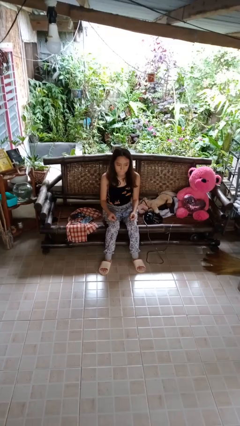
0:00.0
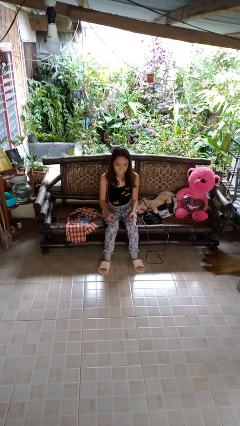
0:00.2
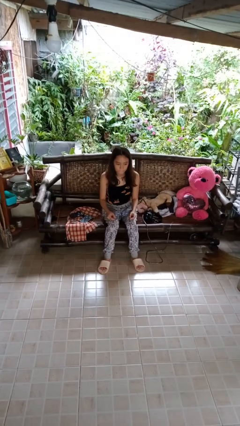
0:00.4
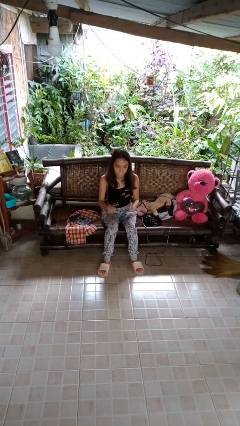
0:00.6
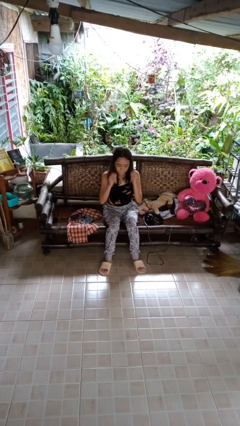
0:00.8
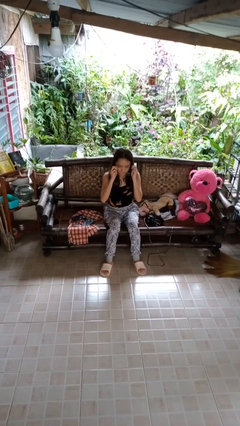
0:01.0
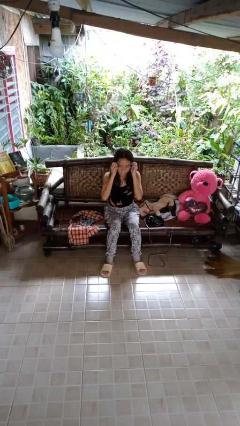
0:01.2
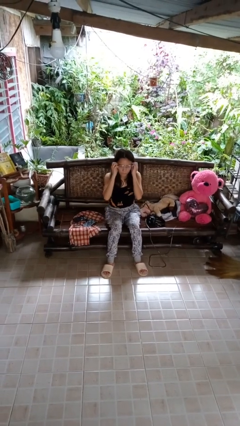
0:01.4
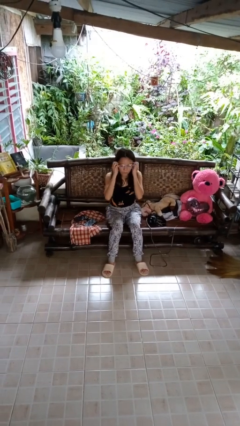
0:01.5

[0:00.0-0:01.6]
person puts on glasses

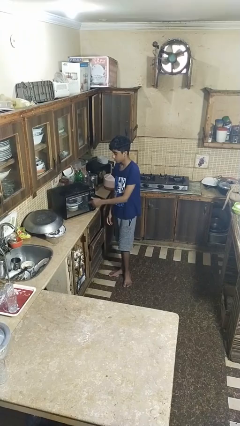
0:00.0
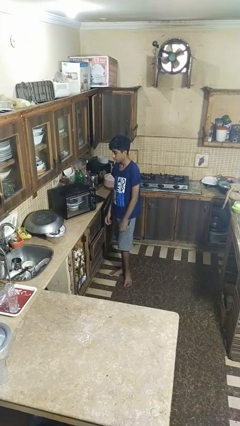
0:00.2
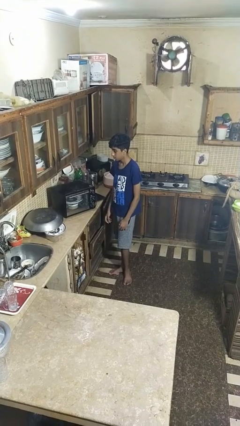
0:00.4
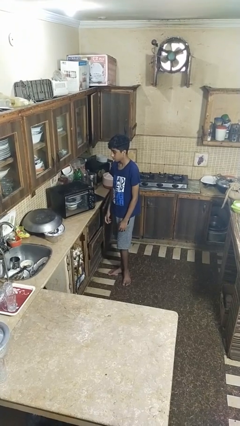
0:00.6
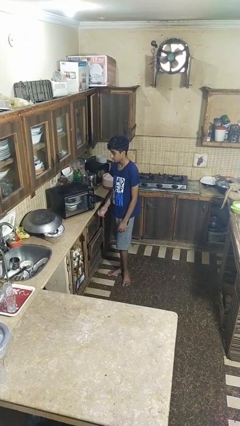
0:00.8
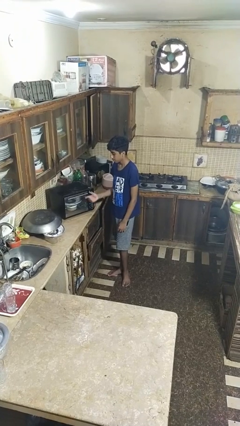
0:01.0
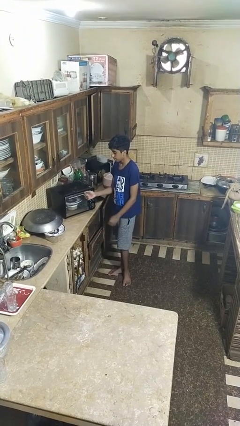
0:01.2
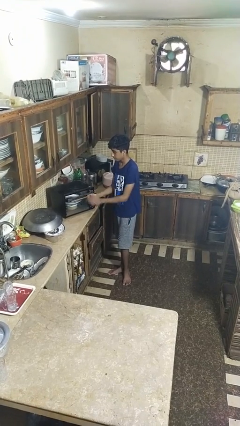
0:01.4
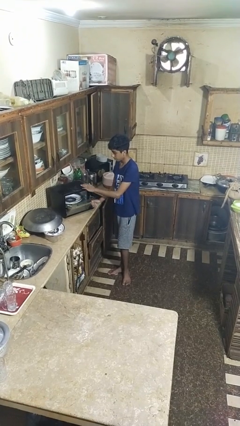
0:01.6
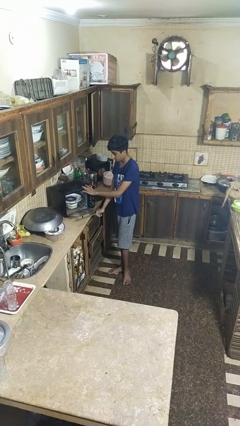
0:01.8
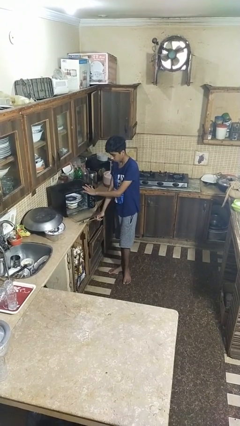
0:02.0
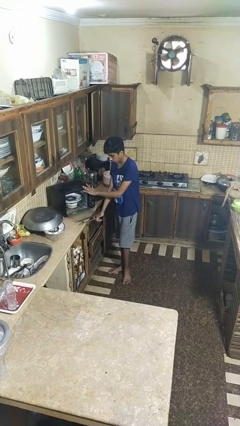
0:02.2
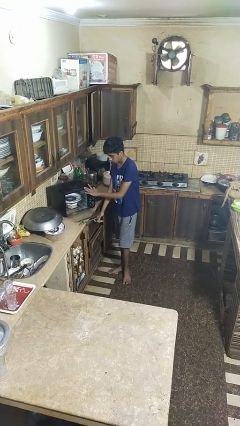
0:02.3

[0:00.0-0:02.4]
person opens dishwasher

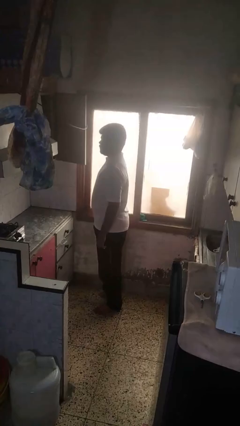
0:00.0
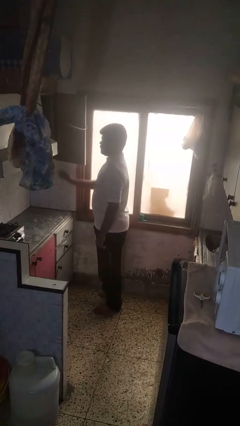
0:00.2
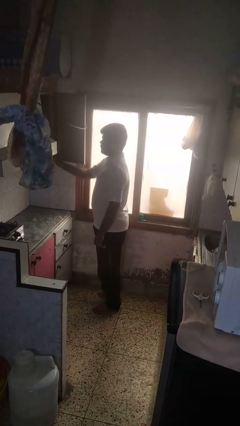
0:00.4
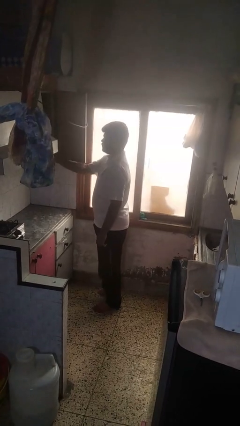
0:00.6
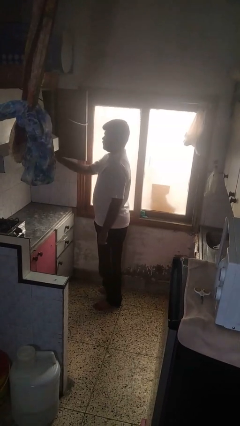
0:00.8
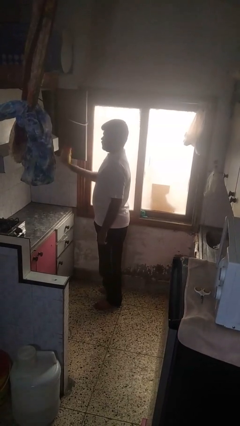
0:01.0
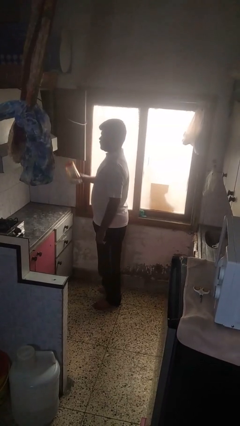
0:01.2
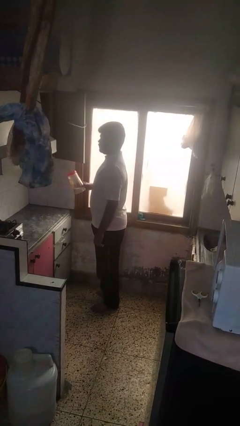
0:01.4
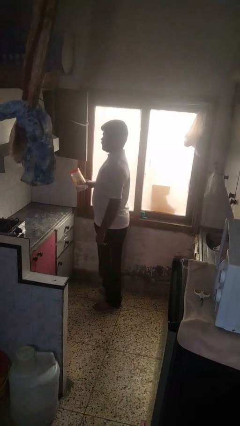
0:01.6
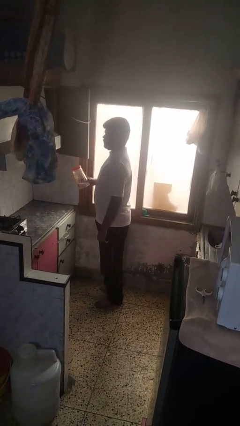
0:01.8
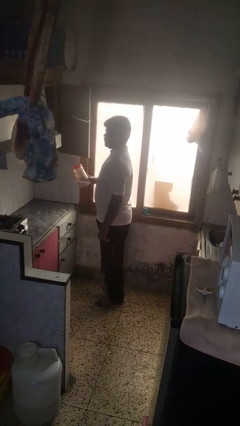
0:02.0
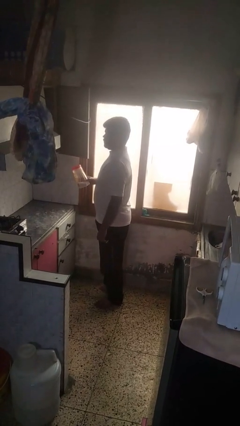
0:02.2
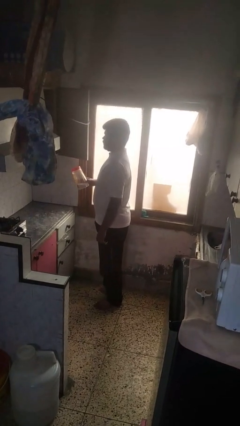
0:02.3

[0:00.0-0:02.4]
person picks up object from cabinet

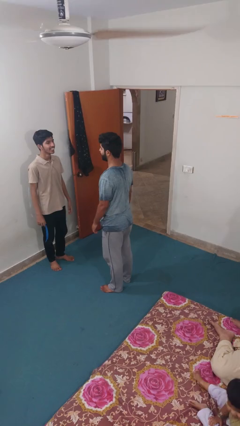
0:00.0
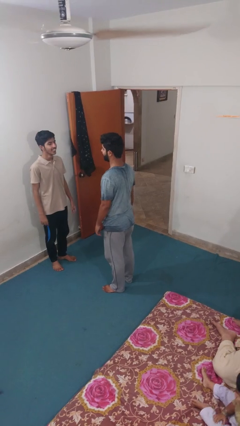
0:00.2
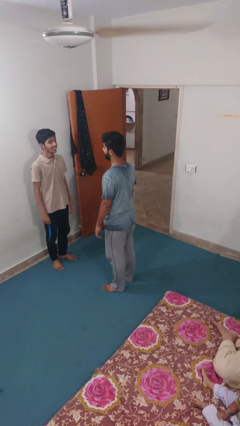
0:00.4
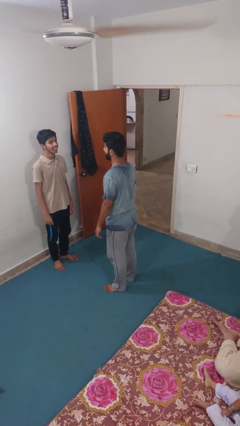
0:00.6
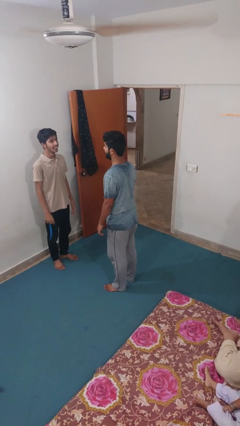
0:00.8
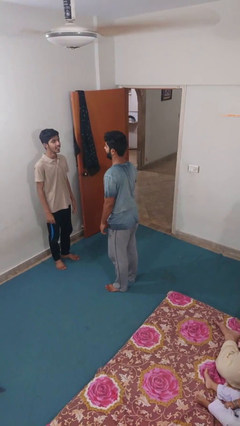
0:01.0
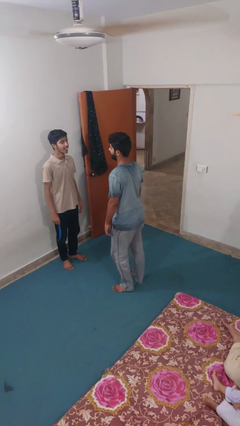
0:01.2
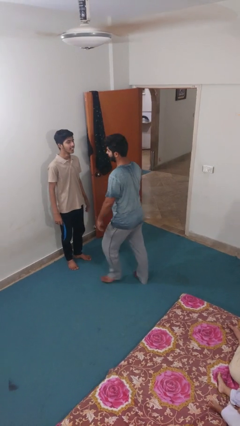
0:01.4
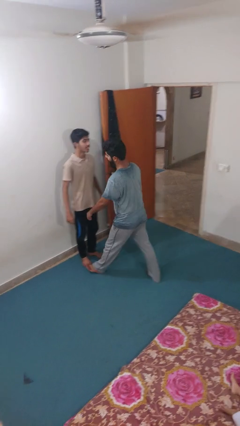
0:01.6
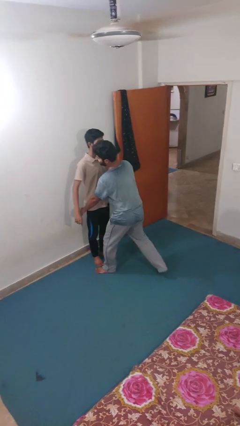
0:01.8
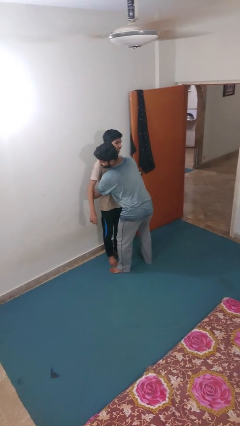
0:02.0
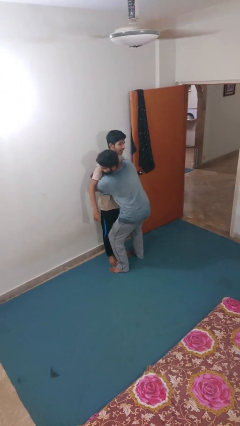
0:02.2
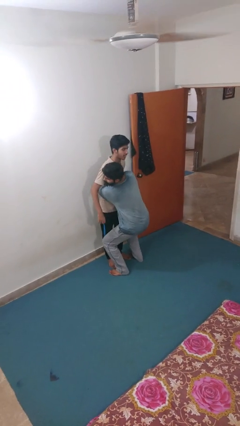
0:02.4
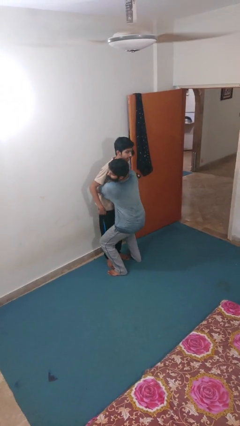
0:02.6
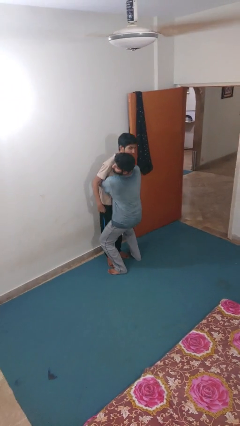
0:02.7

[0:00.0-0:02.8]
person picks up person

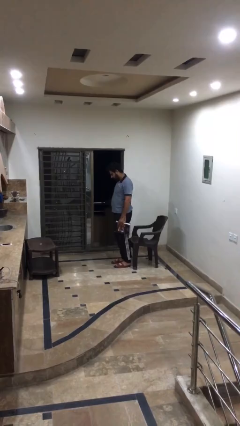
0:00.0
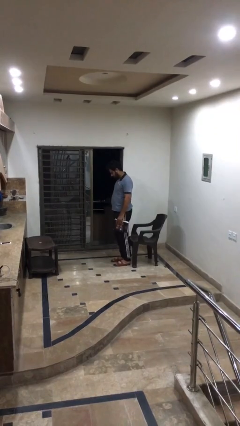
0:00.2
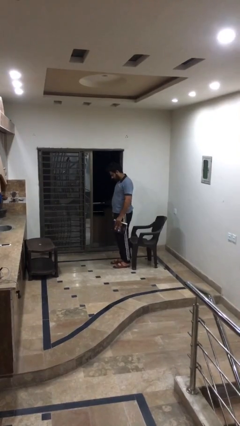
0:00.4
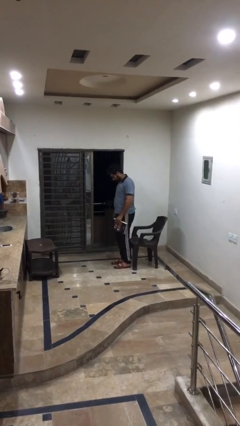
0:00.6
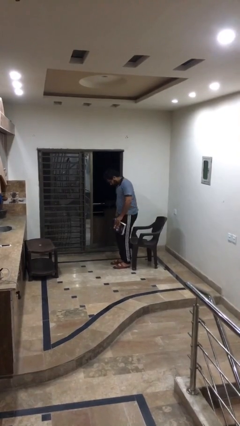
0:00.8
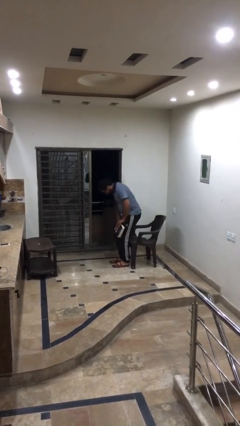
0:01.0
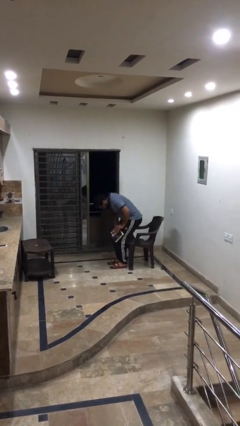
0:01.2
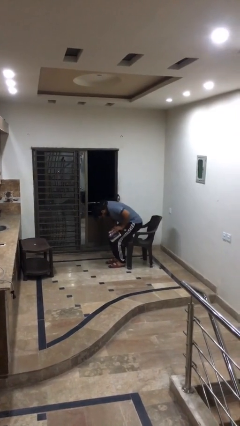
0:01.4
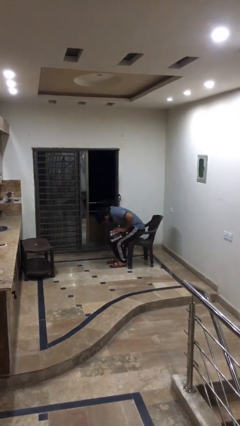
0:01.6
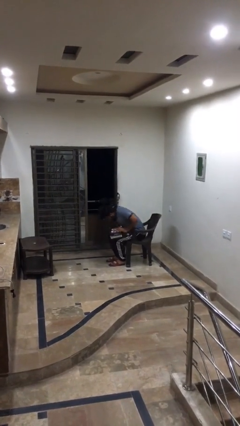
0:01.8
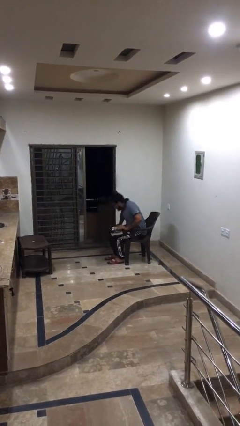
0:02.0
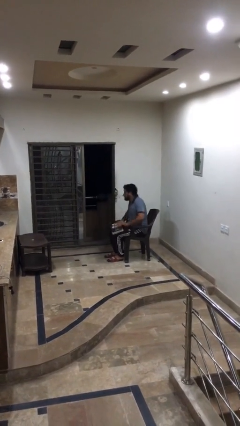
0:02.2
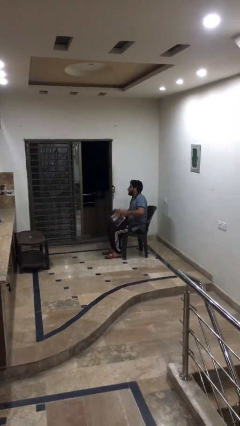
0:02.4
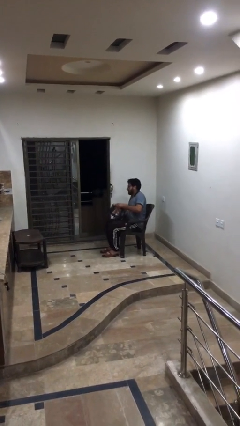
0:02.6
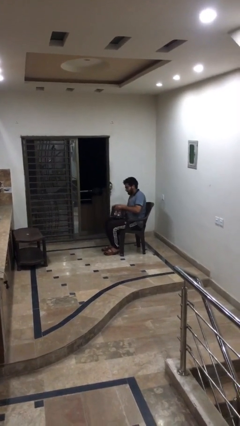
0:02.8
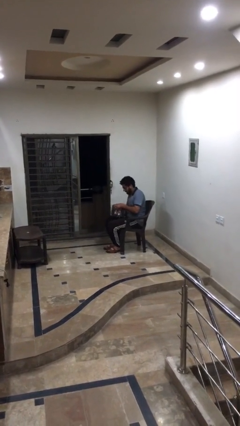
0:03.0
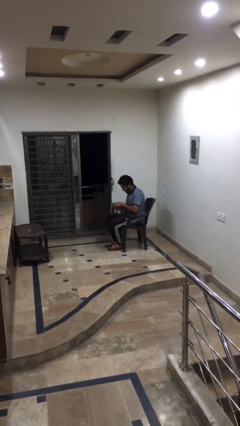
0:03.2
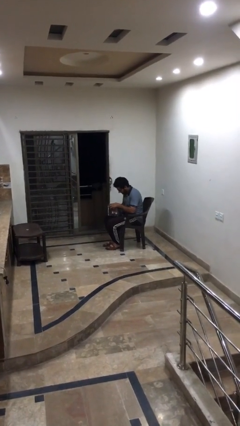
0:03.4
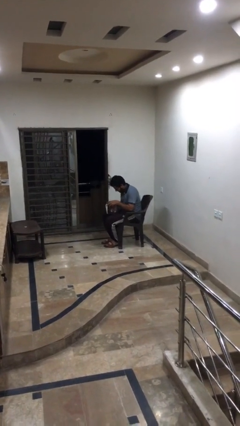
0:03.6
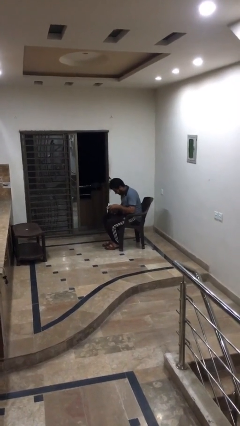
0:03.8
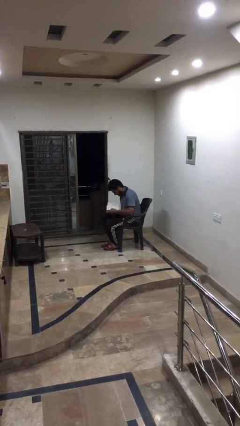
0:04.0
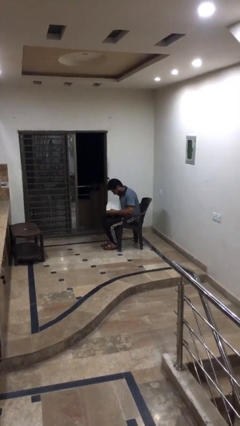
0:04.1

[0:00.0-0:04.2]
person sits down

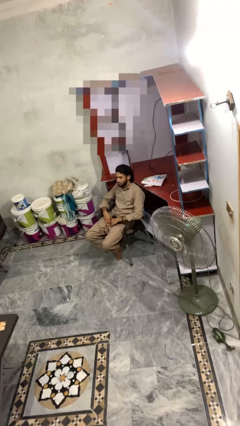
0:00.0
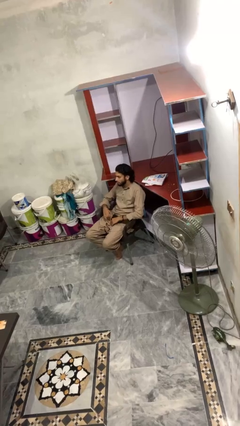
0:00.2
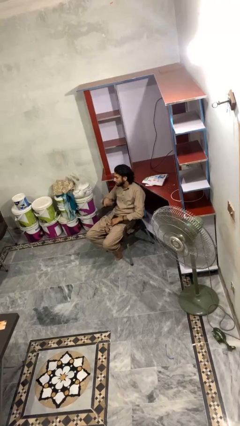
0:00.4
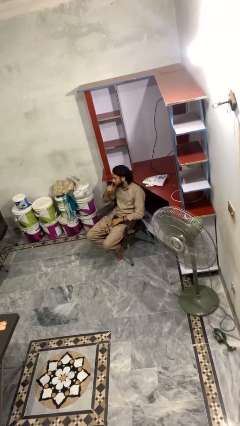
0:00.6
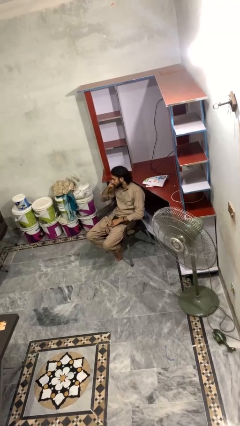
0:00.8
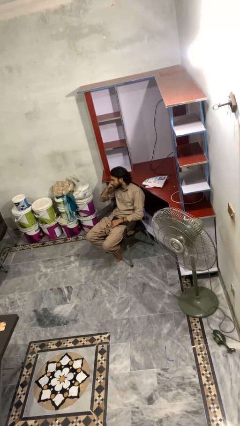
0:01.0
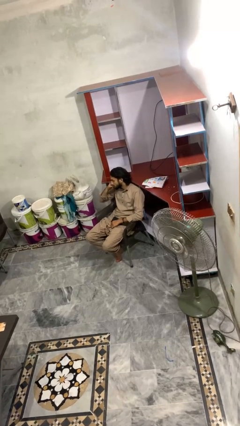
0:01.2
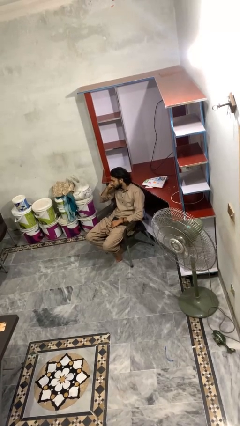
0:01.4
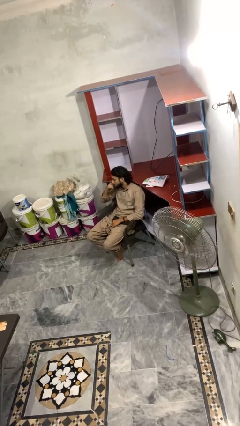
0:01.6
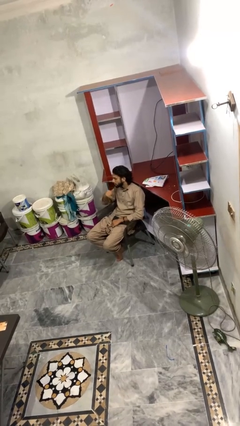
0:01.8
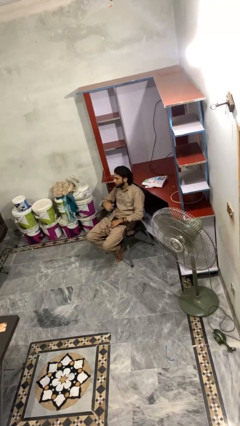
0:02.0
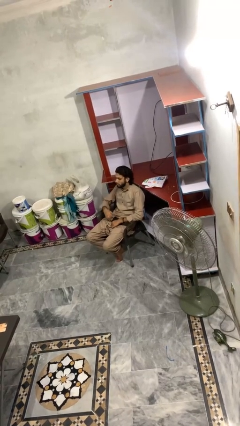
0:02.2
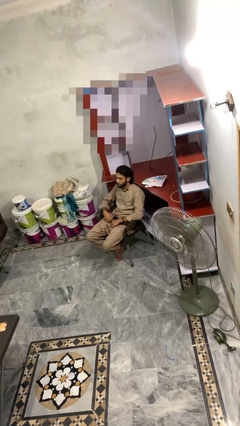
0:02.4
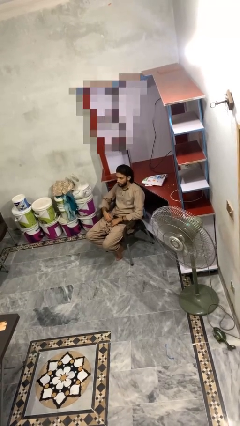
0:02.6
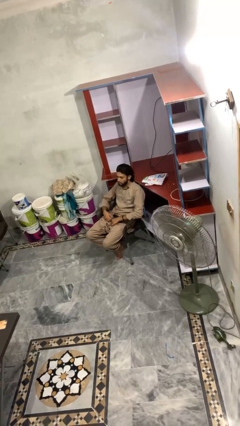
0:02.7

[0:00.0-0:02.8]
person gestures call me

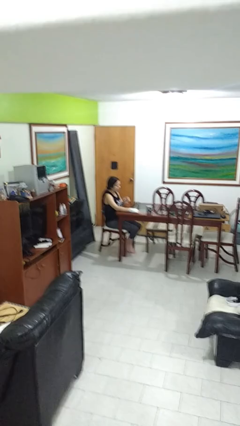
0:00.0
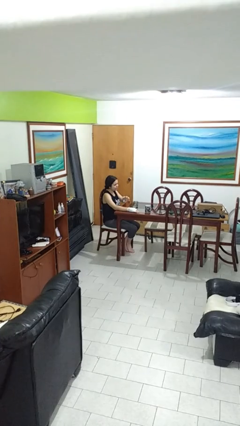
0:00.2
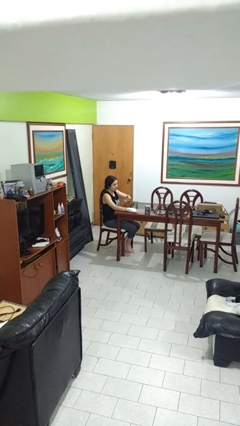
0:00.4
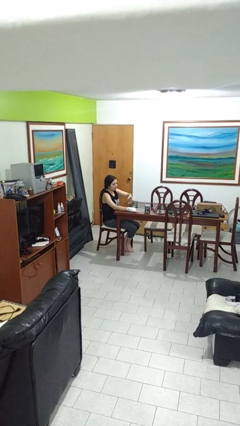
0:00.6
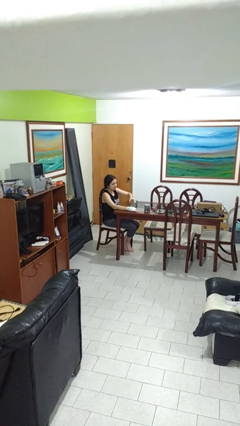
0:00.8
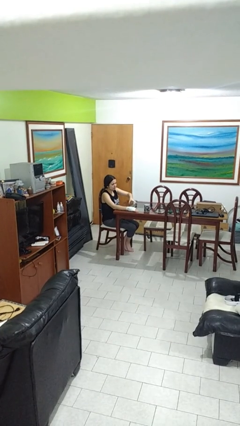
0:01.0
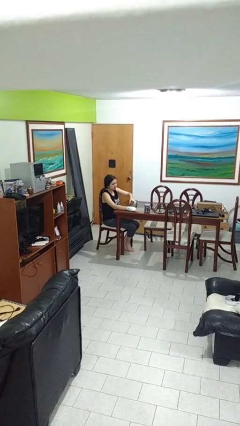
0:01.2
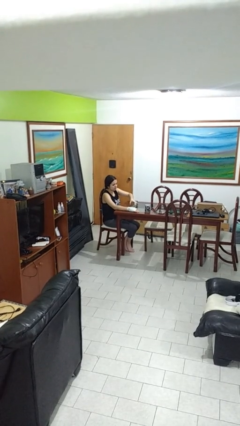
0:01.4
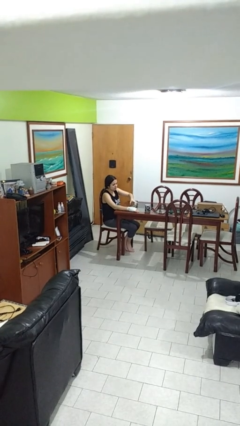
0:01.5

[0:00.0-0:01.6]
person puts down object on table
